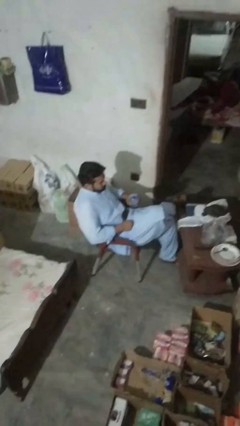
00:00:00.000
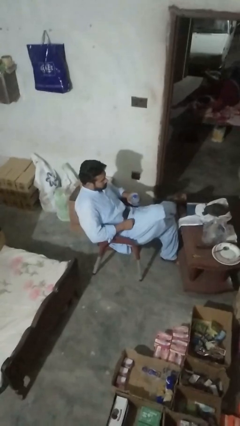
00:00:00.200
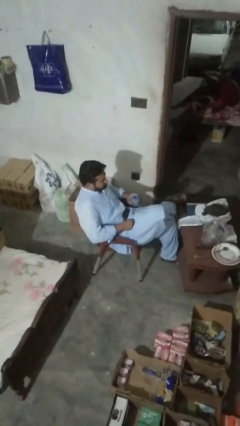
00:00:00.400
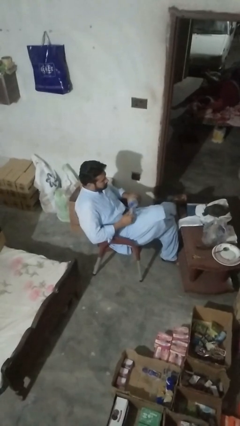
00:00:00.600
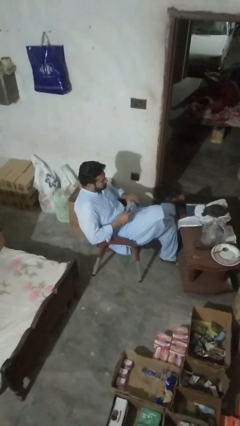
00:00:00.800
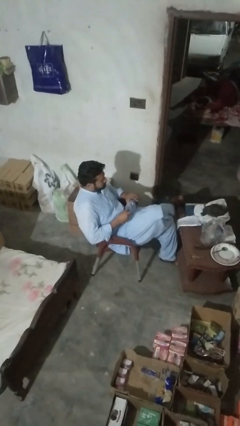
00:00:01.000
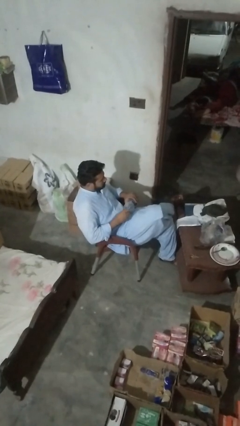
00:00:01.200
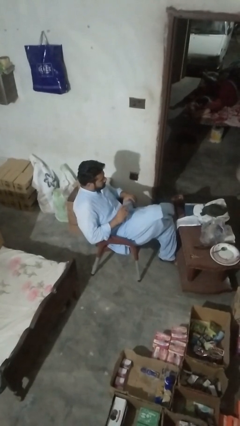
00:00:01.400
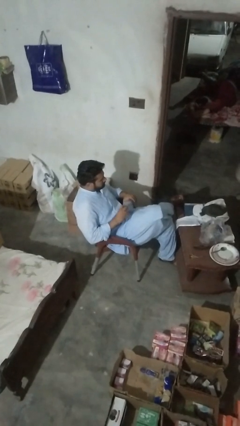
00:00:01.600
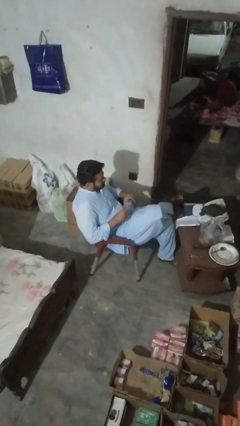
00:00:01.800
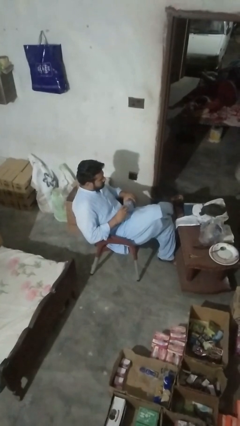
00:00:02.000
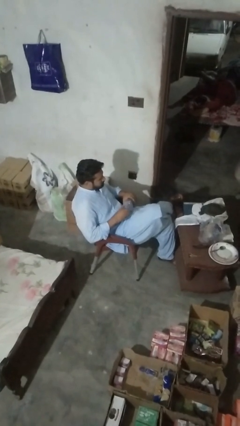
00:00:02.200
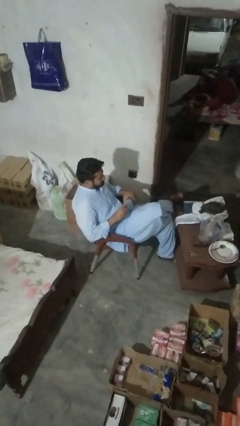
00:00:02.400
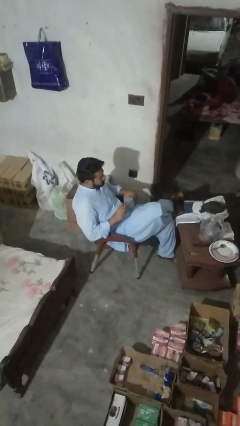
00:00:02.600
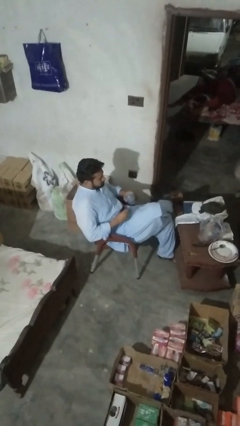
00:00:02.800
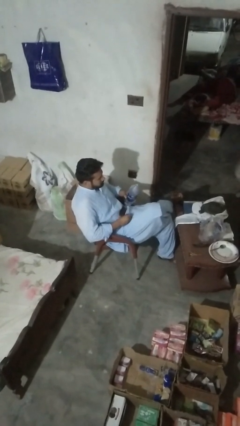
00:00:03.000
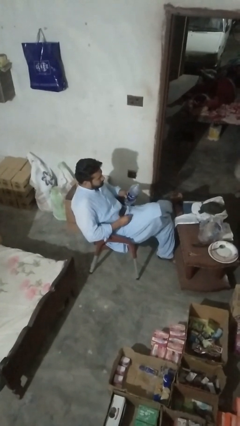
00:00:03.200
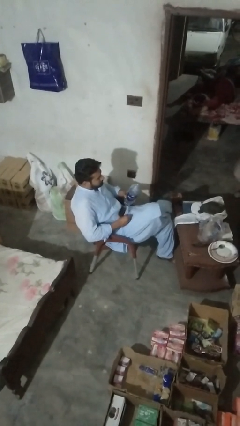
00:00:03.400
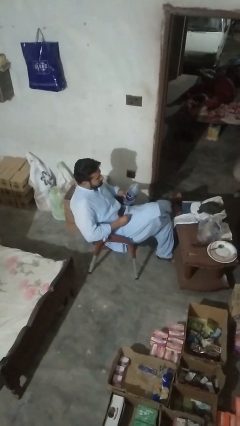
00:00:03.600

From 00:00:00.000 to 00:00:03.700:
person unscrews lid from bottle

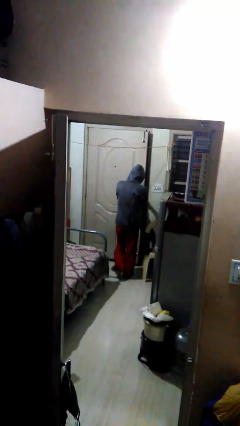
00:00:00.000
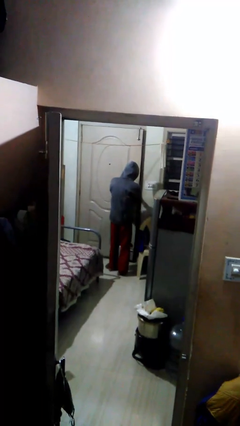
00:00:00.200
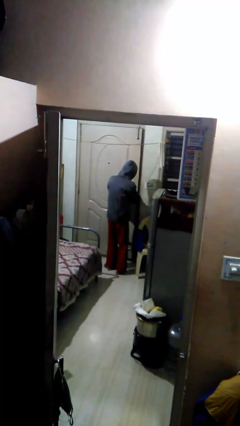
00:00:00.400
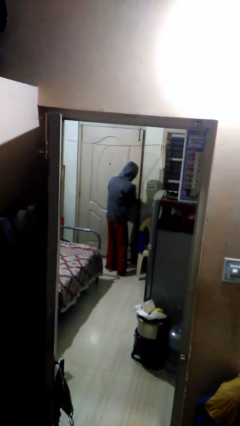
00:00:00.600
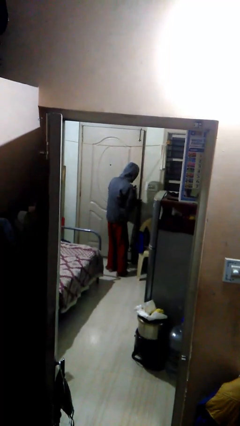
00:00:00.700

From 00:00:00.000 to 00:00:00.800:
person opens facility door

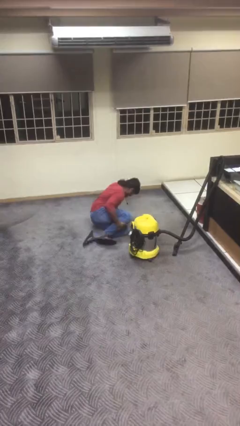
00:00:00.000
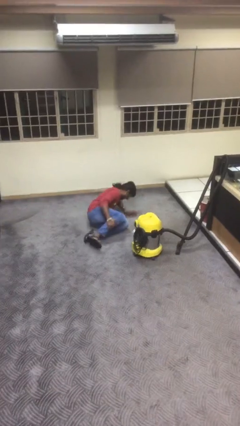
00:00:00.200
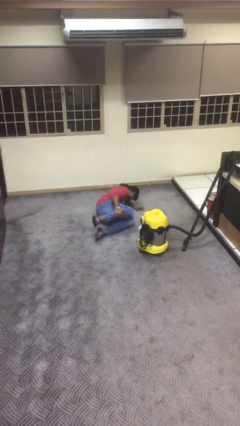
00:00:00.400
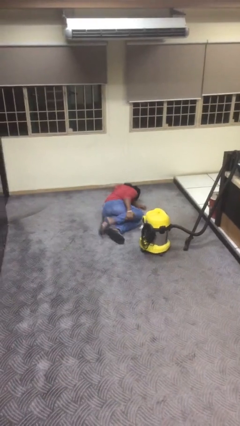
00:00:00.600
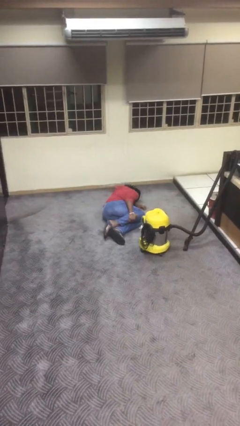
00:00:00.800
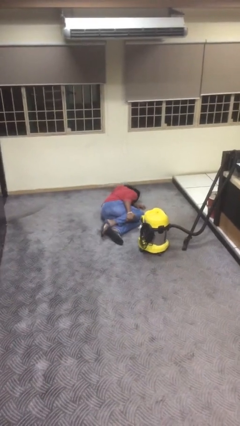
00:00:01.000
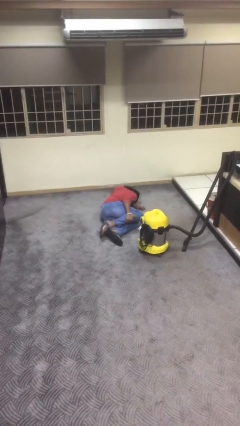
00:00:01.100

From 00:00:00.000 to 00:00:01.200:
person lies down on floor

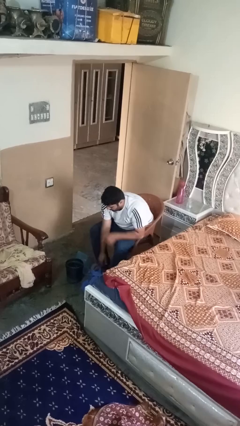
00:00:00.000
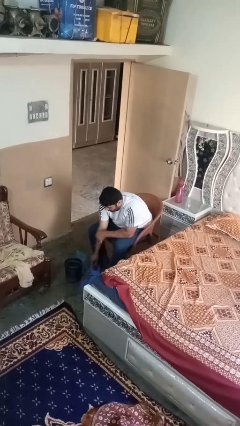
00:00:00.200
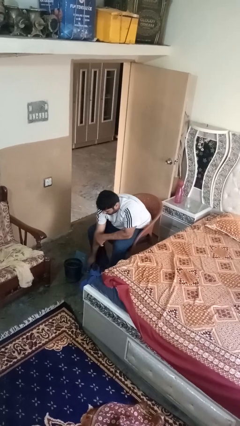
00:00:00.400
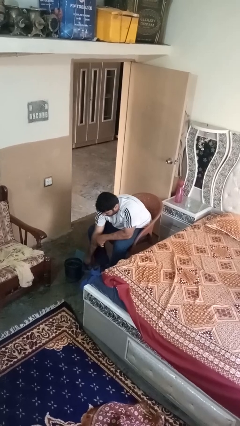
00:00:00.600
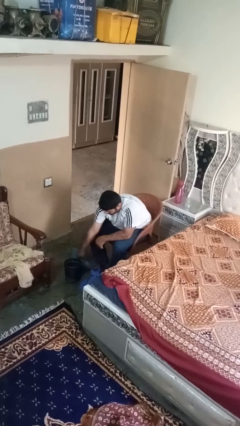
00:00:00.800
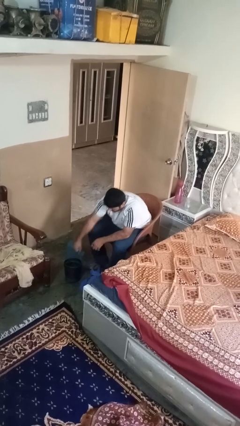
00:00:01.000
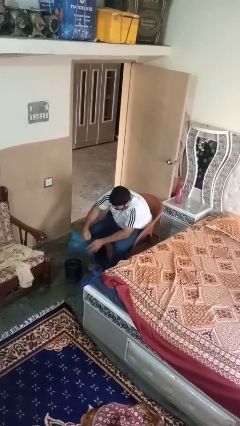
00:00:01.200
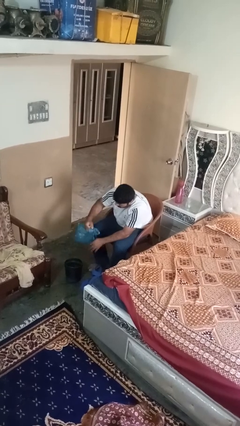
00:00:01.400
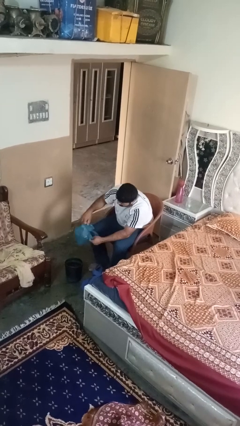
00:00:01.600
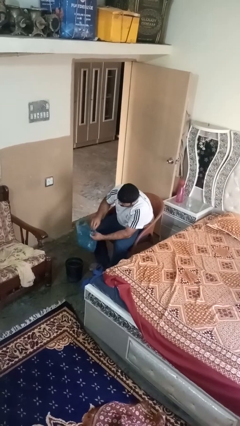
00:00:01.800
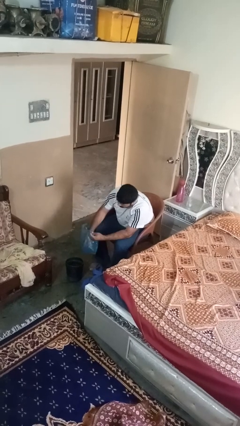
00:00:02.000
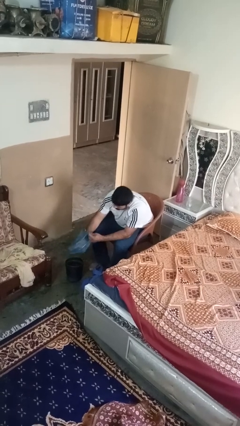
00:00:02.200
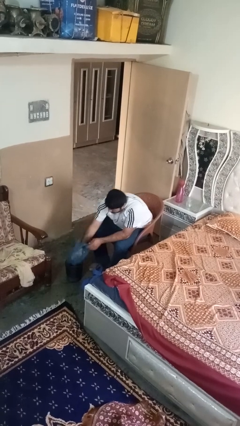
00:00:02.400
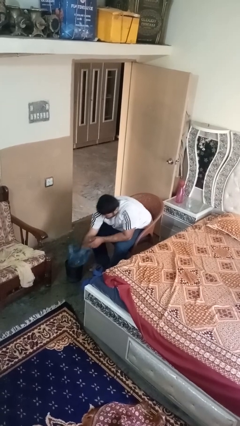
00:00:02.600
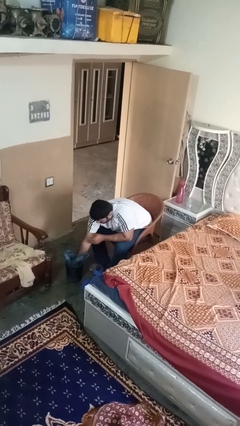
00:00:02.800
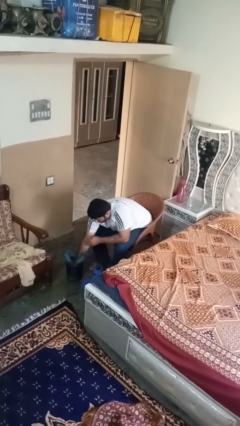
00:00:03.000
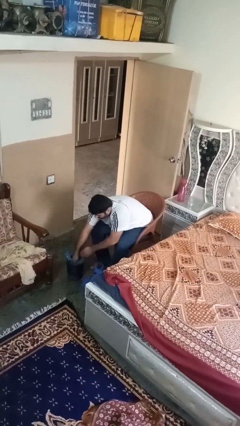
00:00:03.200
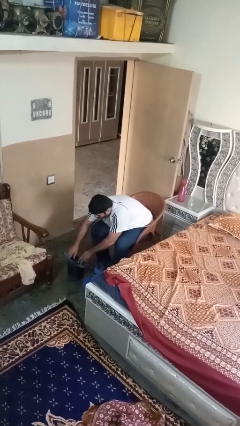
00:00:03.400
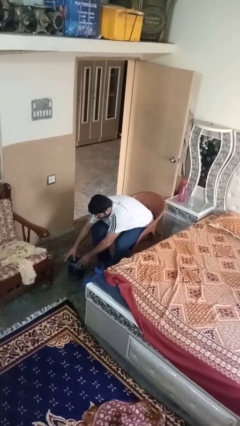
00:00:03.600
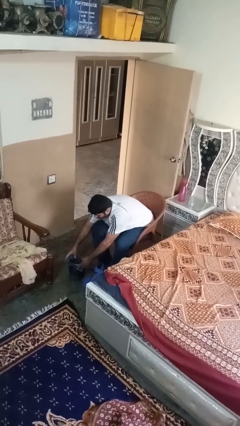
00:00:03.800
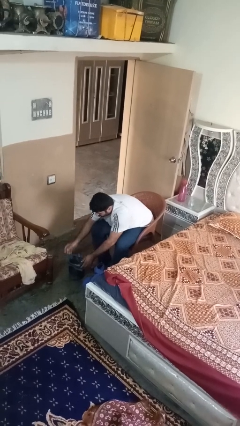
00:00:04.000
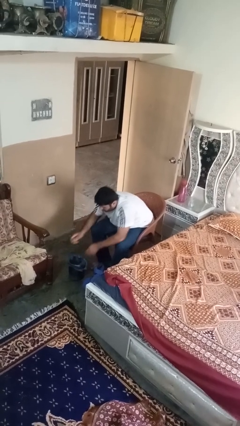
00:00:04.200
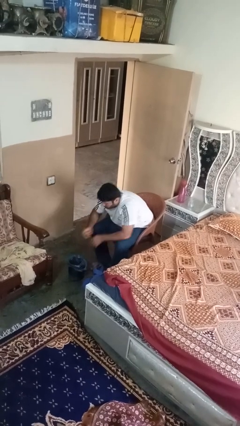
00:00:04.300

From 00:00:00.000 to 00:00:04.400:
person inserts trashbag into trashcan

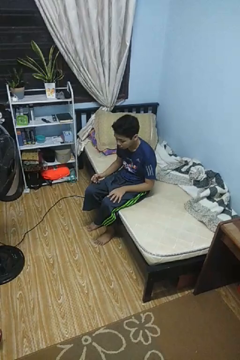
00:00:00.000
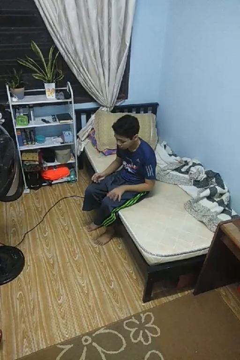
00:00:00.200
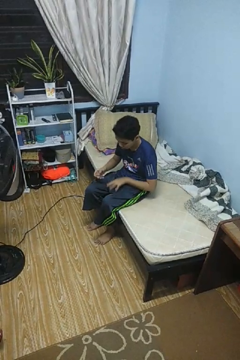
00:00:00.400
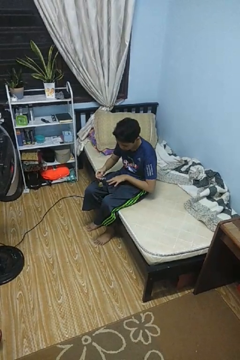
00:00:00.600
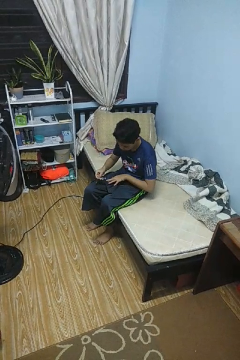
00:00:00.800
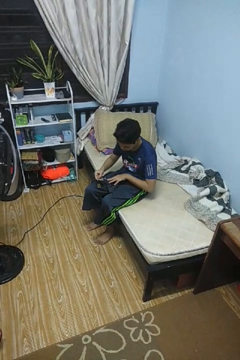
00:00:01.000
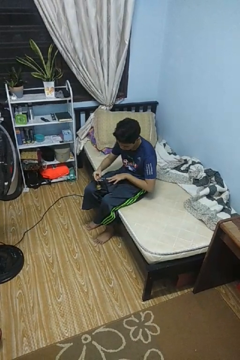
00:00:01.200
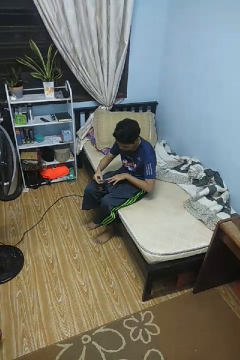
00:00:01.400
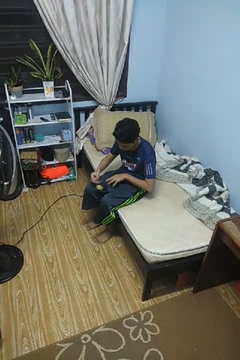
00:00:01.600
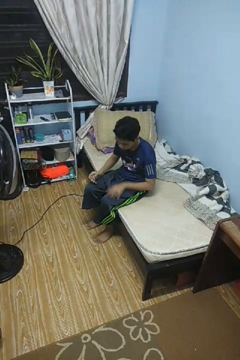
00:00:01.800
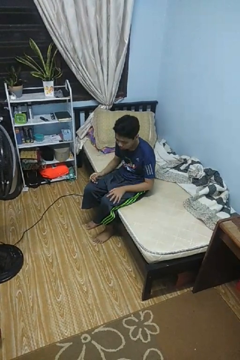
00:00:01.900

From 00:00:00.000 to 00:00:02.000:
person clips fingernails

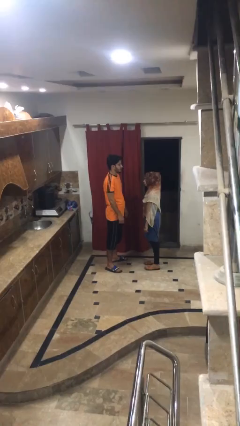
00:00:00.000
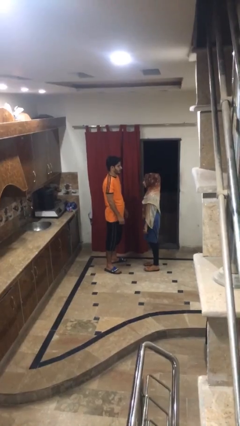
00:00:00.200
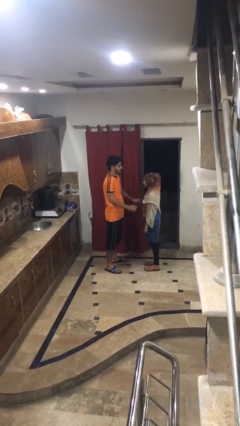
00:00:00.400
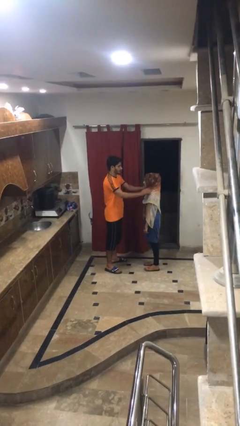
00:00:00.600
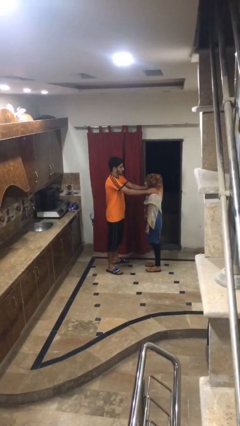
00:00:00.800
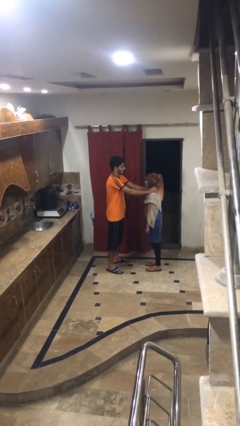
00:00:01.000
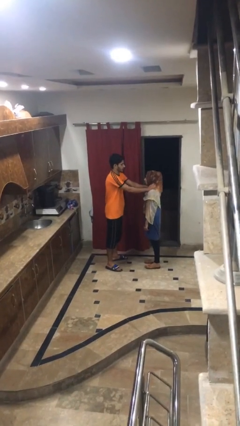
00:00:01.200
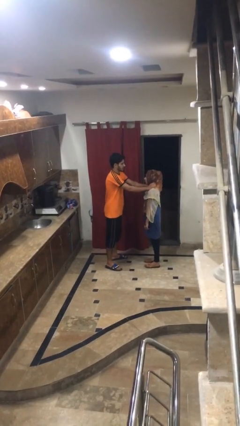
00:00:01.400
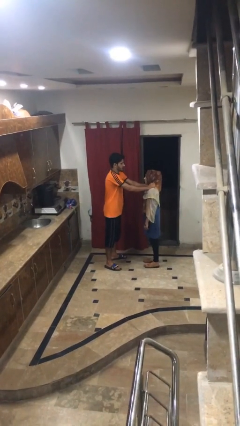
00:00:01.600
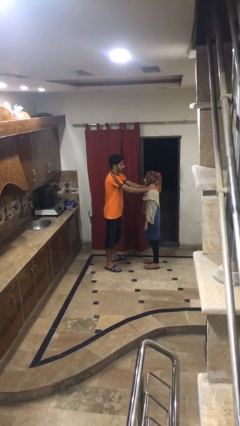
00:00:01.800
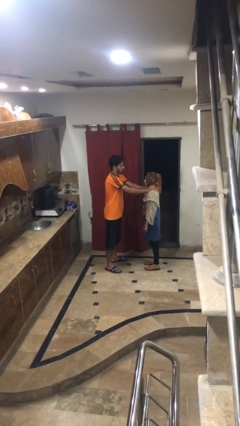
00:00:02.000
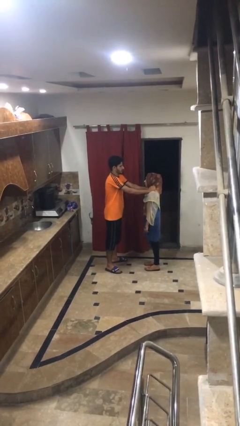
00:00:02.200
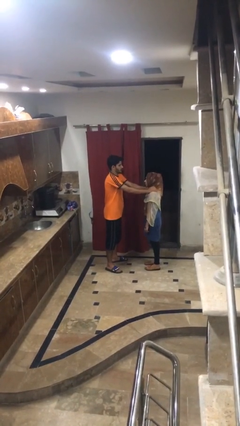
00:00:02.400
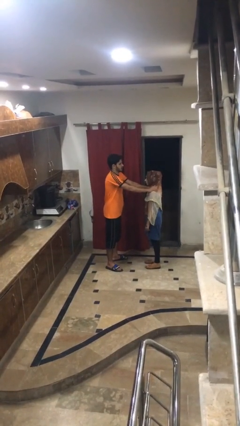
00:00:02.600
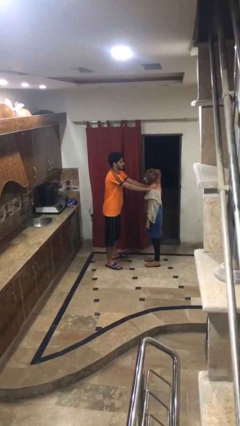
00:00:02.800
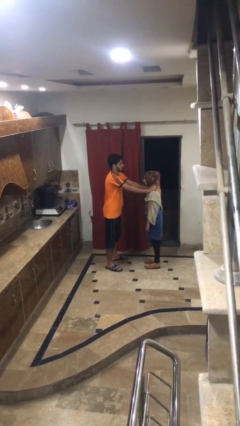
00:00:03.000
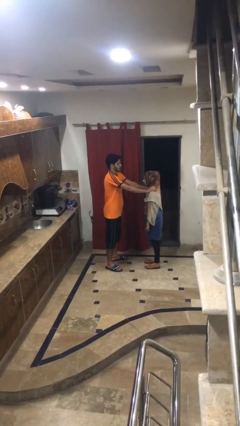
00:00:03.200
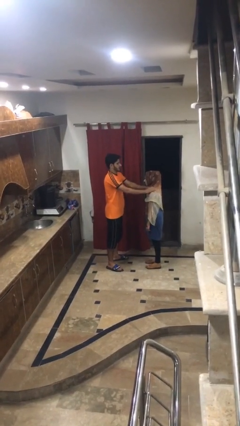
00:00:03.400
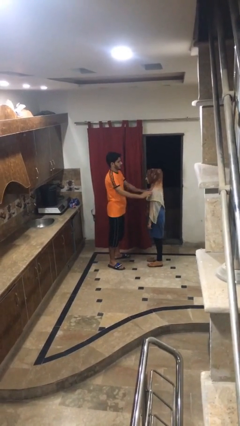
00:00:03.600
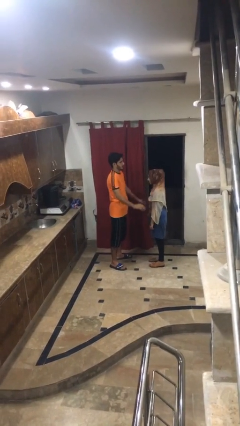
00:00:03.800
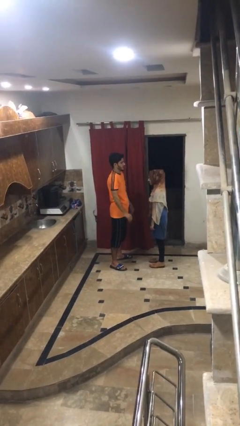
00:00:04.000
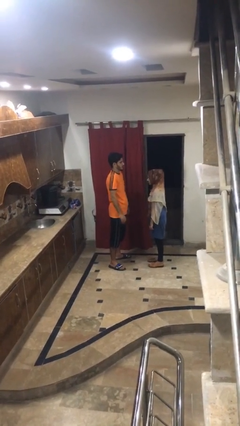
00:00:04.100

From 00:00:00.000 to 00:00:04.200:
person pounds shoulders of person

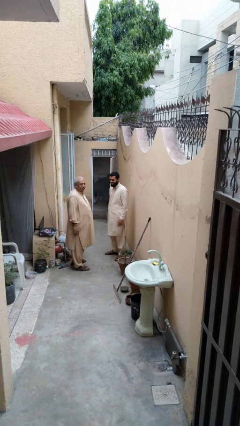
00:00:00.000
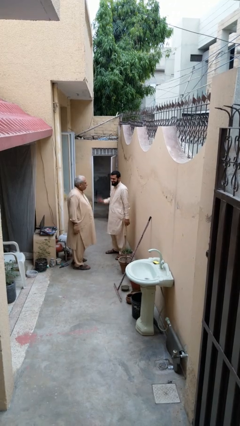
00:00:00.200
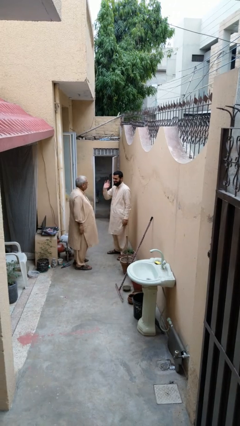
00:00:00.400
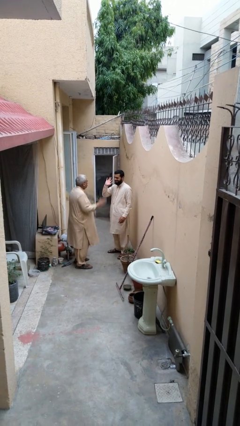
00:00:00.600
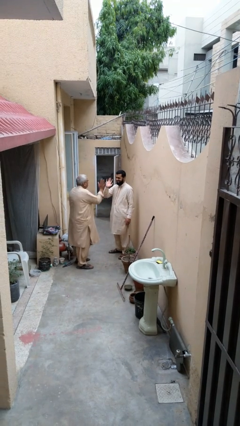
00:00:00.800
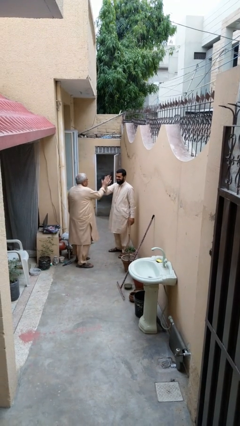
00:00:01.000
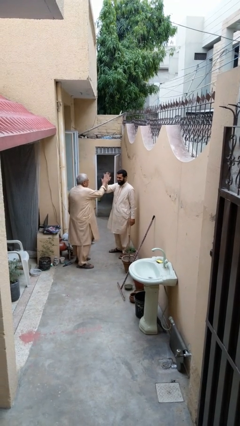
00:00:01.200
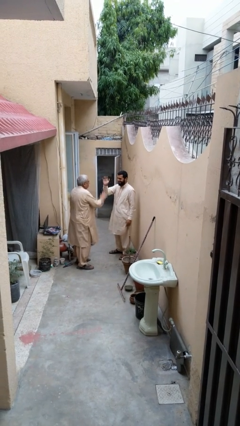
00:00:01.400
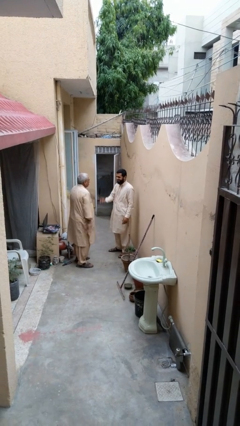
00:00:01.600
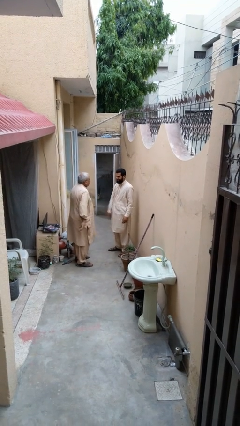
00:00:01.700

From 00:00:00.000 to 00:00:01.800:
person highfives hand

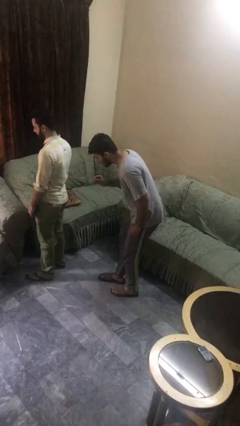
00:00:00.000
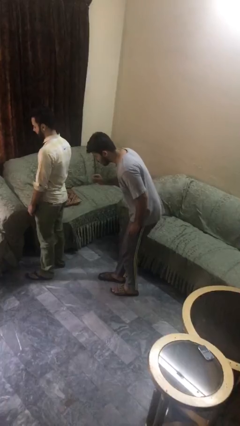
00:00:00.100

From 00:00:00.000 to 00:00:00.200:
person steals object from person
